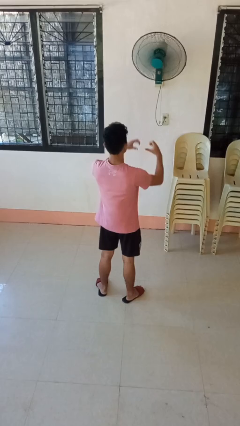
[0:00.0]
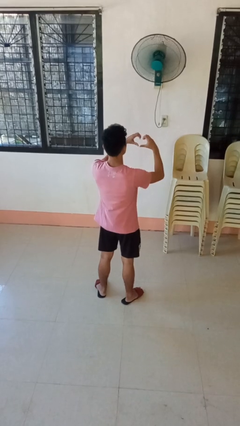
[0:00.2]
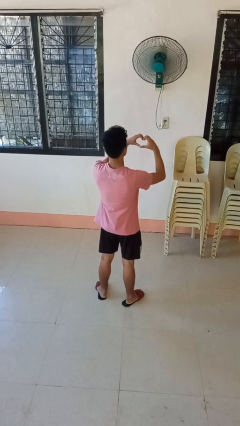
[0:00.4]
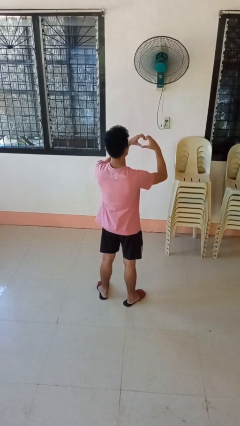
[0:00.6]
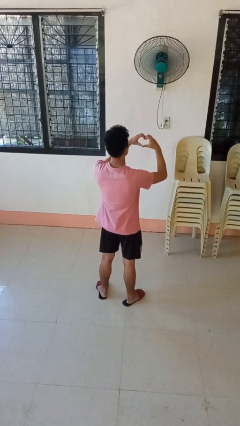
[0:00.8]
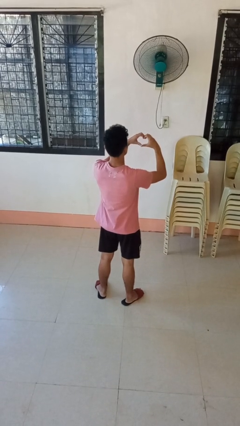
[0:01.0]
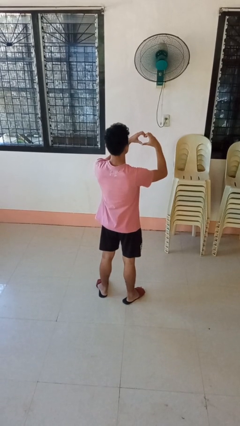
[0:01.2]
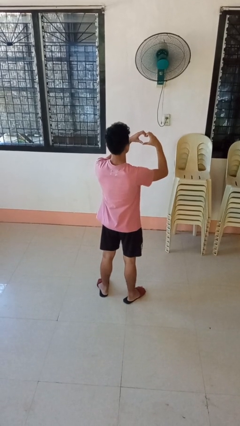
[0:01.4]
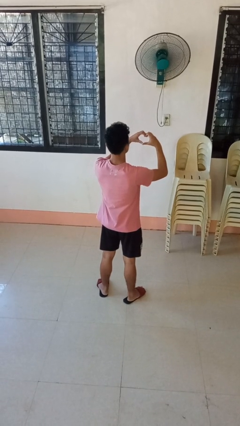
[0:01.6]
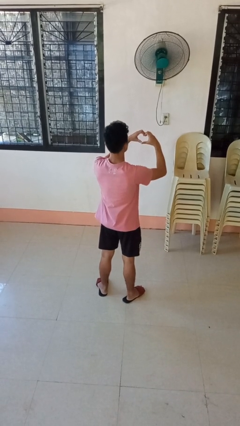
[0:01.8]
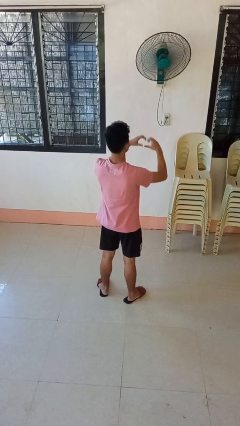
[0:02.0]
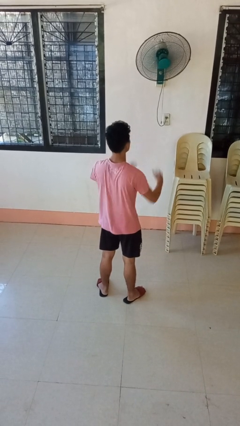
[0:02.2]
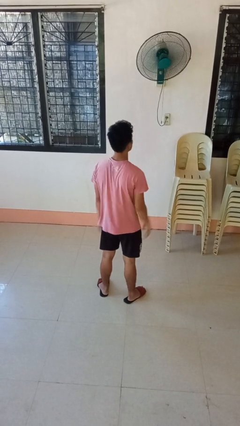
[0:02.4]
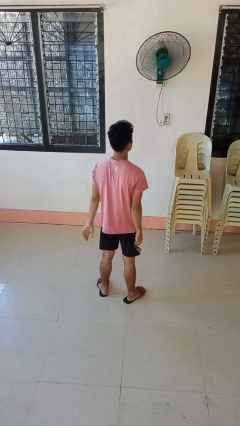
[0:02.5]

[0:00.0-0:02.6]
person gestures heart

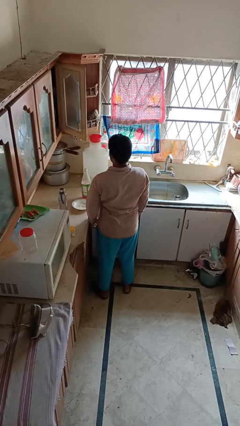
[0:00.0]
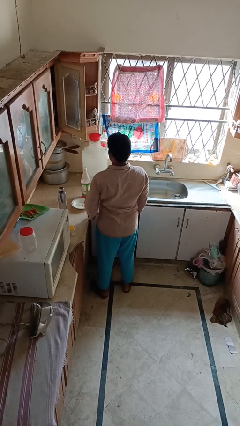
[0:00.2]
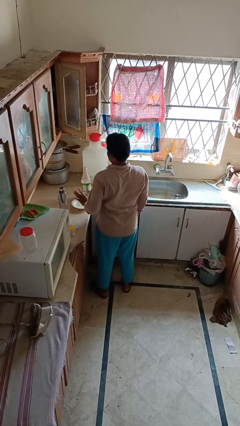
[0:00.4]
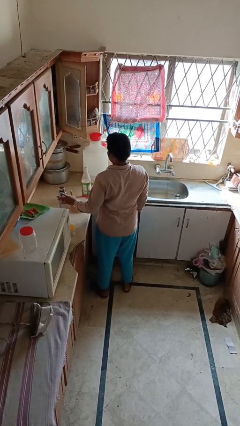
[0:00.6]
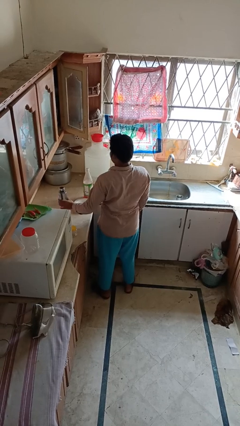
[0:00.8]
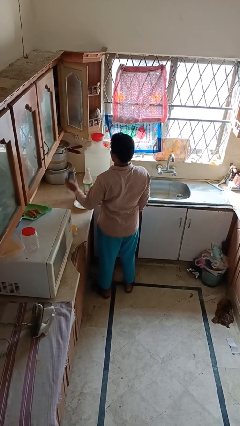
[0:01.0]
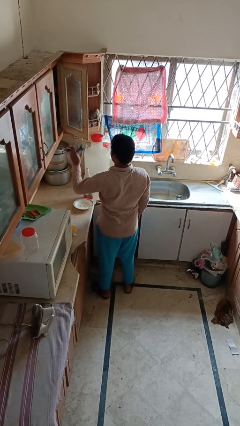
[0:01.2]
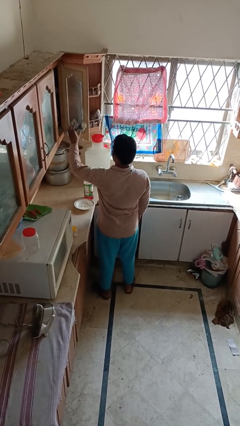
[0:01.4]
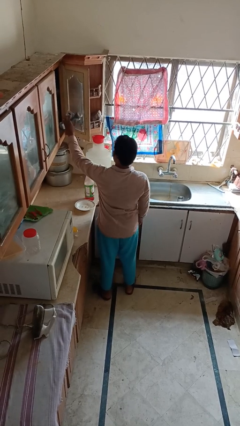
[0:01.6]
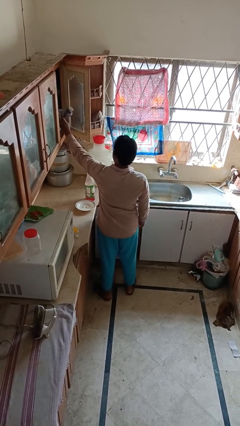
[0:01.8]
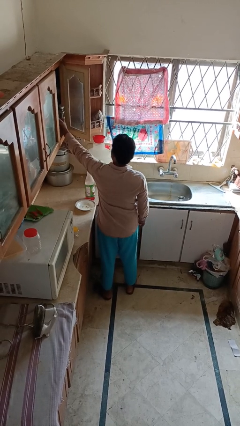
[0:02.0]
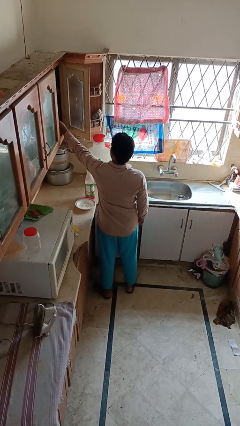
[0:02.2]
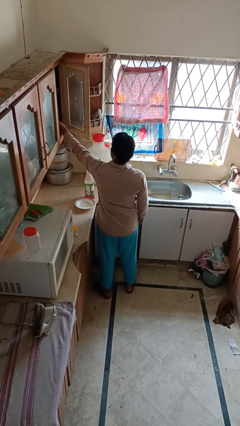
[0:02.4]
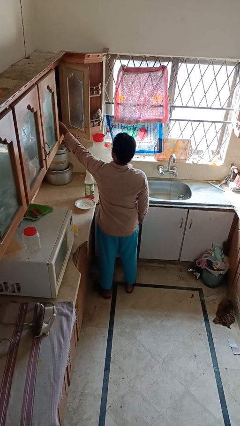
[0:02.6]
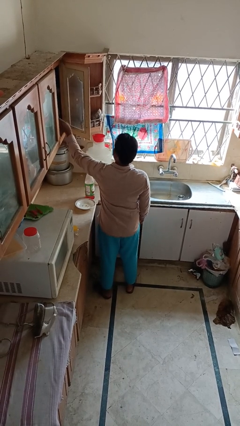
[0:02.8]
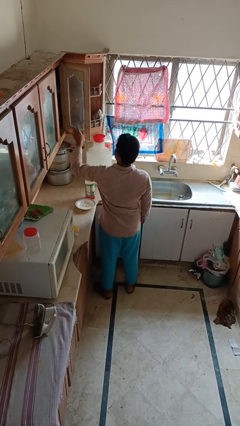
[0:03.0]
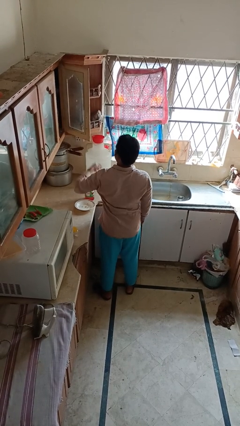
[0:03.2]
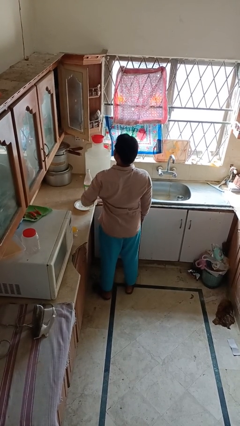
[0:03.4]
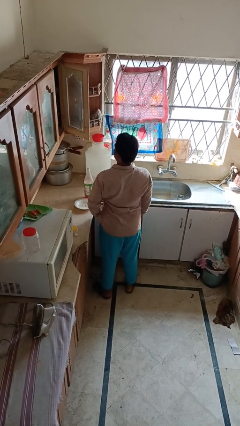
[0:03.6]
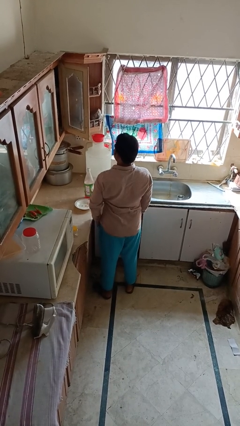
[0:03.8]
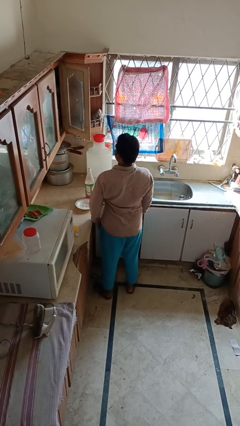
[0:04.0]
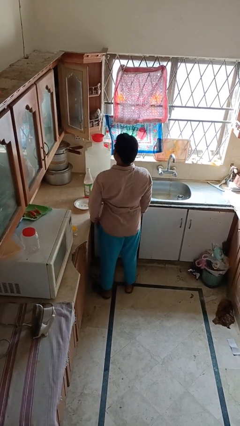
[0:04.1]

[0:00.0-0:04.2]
person puts object in cabinet

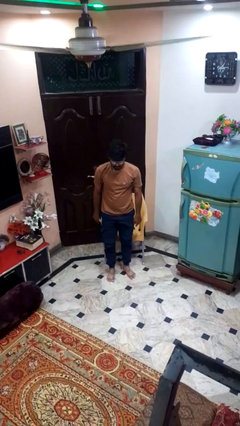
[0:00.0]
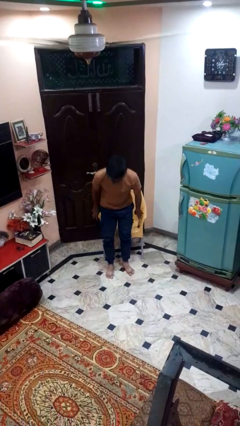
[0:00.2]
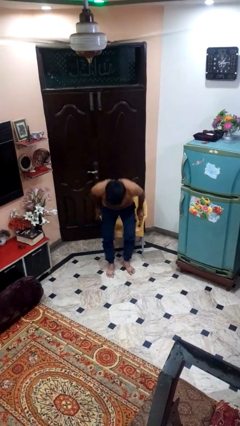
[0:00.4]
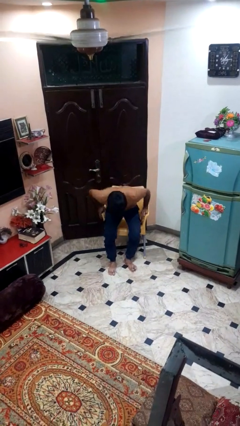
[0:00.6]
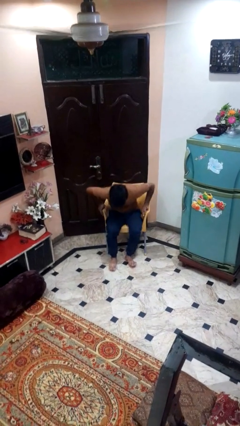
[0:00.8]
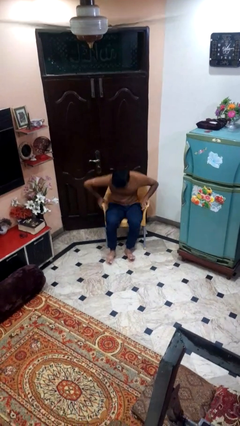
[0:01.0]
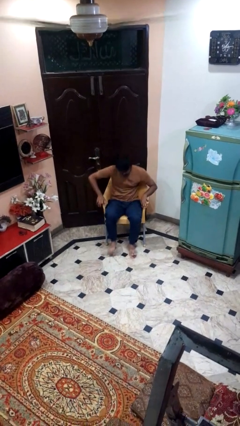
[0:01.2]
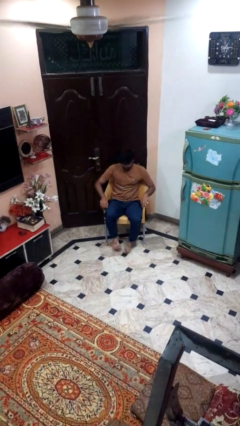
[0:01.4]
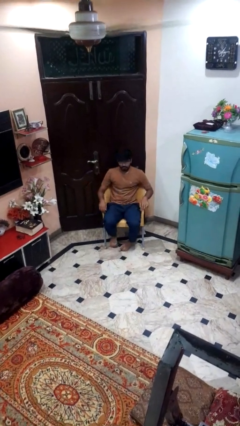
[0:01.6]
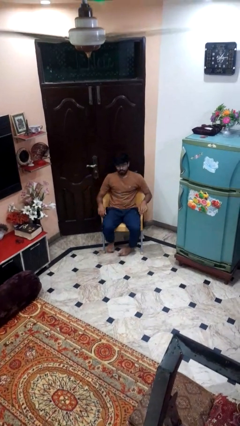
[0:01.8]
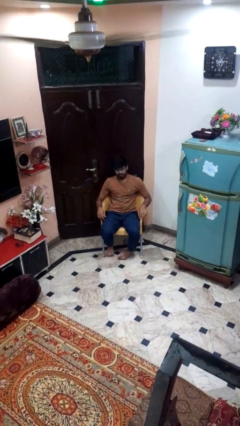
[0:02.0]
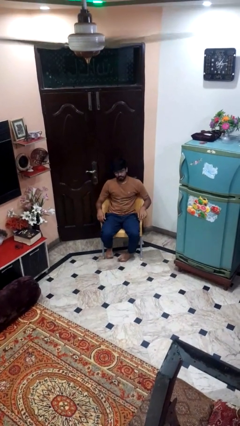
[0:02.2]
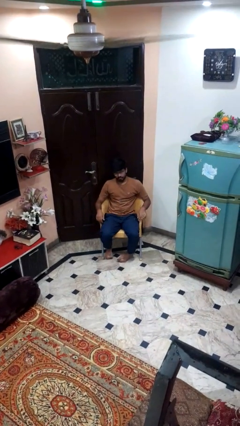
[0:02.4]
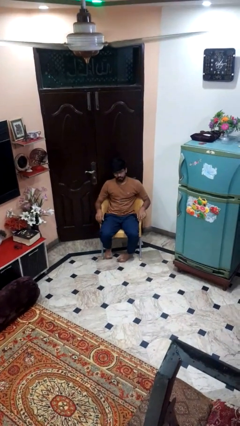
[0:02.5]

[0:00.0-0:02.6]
person sits down

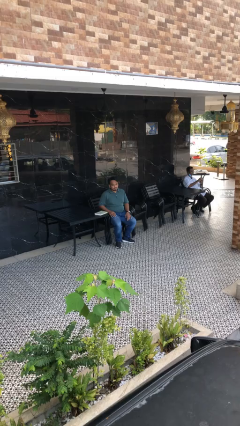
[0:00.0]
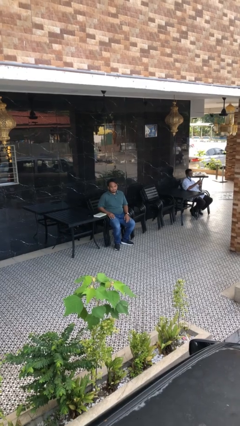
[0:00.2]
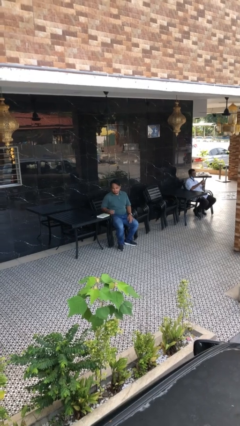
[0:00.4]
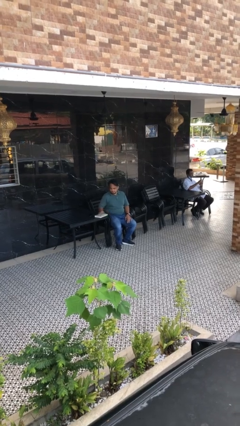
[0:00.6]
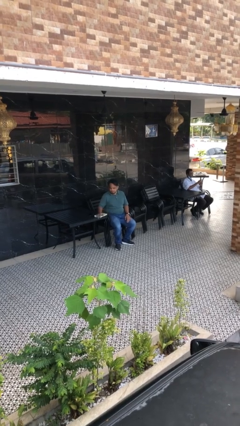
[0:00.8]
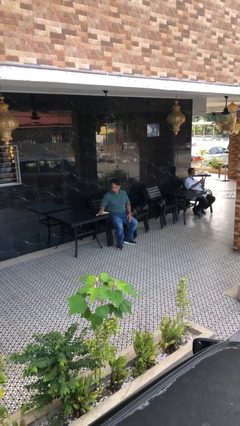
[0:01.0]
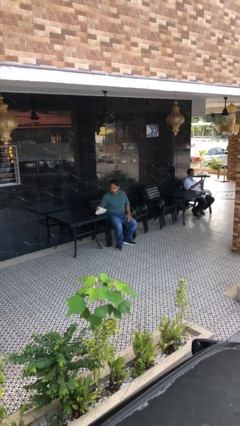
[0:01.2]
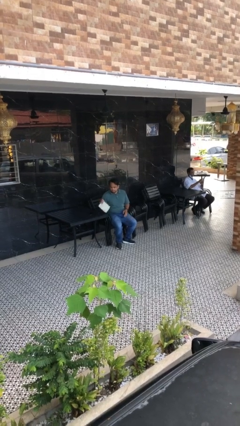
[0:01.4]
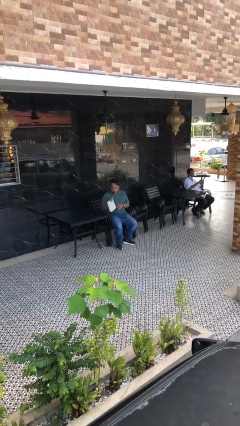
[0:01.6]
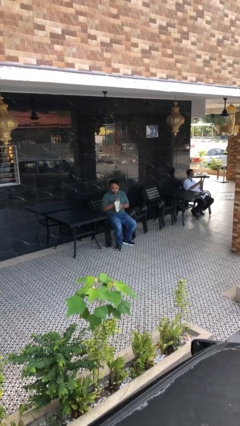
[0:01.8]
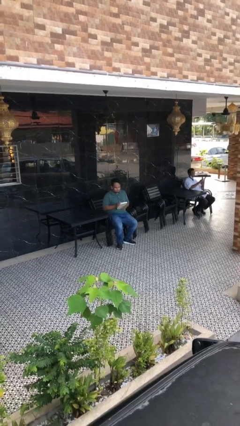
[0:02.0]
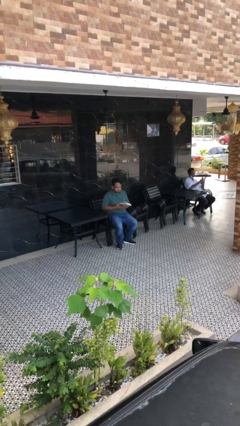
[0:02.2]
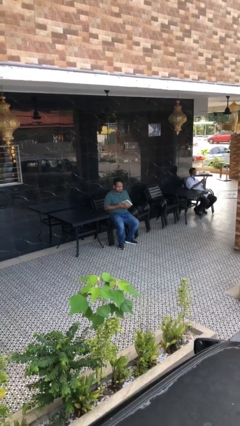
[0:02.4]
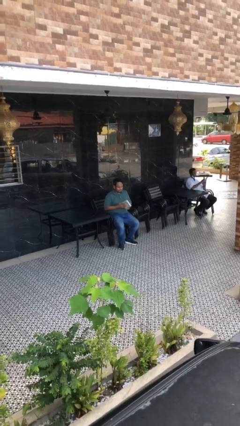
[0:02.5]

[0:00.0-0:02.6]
person picks up object from table

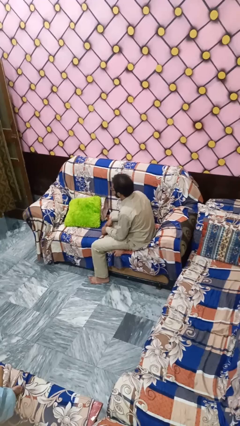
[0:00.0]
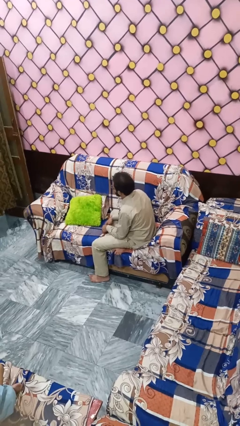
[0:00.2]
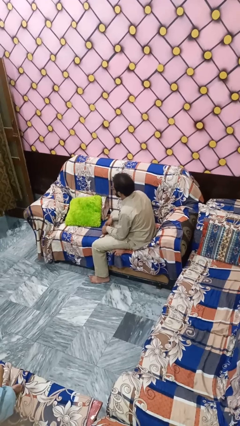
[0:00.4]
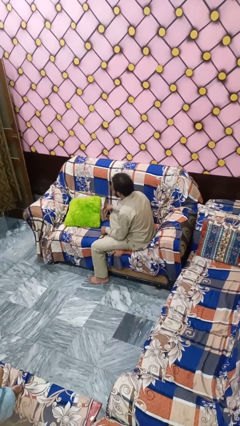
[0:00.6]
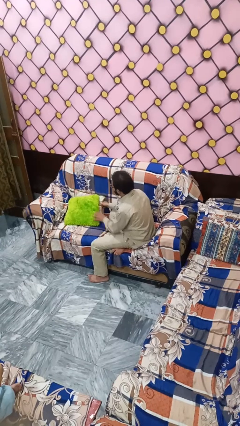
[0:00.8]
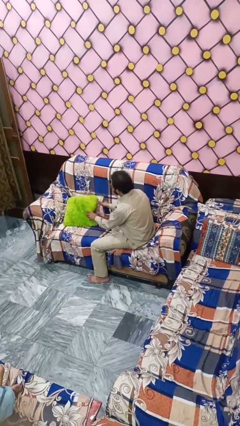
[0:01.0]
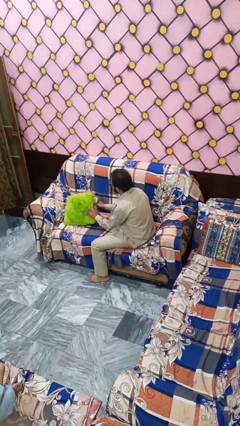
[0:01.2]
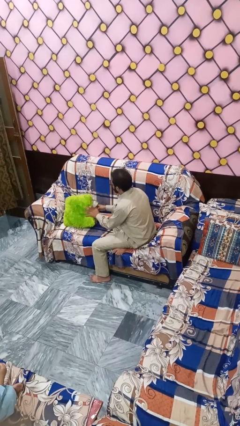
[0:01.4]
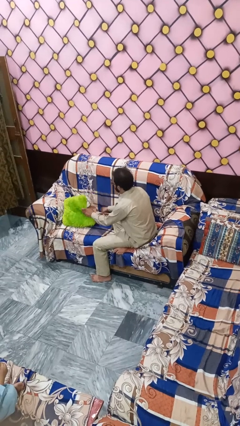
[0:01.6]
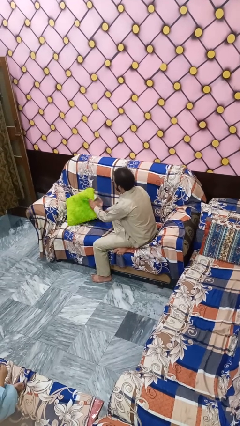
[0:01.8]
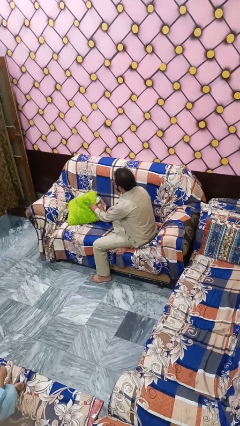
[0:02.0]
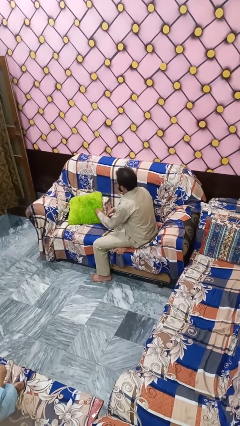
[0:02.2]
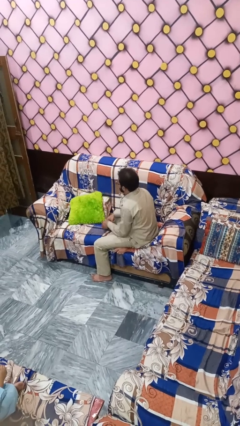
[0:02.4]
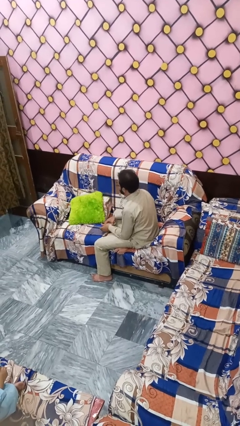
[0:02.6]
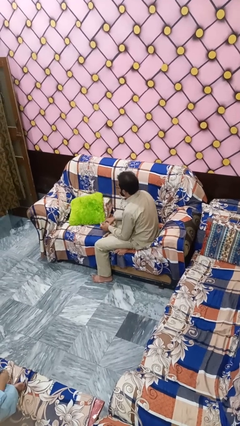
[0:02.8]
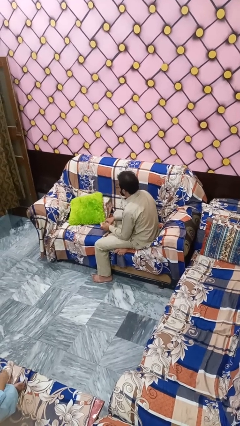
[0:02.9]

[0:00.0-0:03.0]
person searches in couch

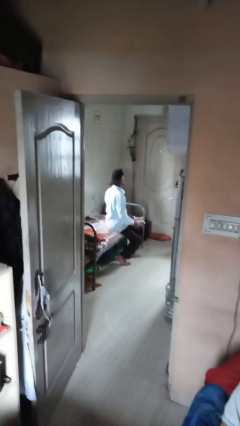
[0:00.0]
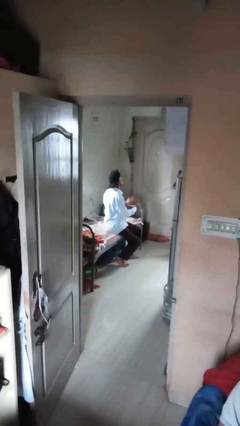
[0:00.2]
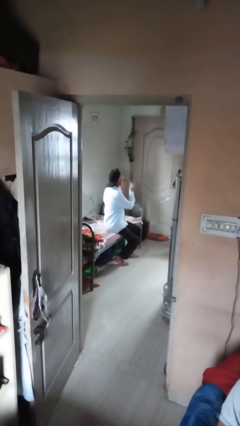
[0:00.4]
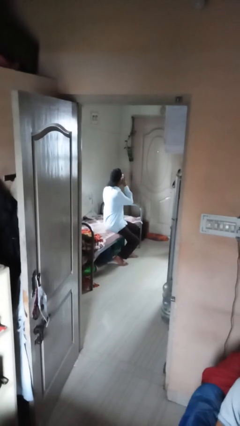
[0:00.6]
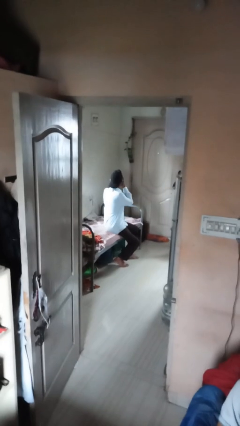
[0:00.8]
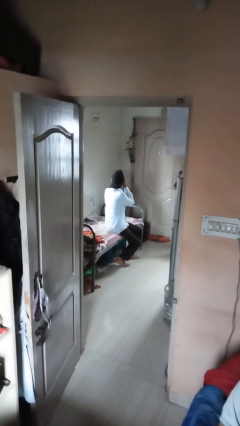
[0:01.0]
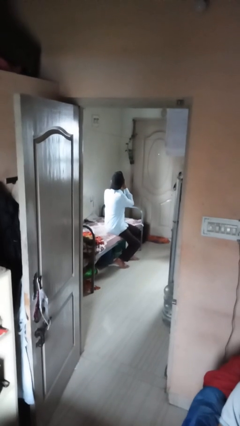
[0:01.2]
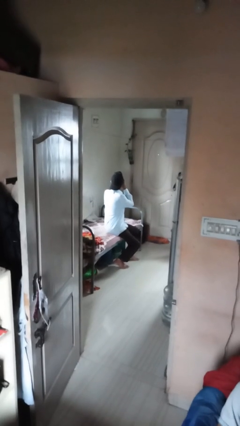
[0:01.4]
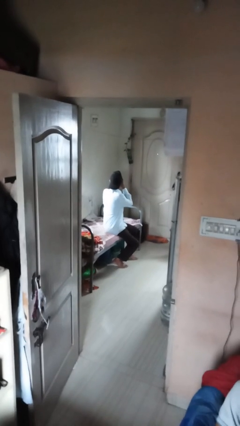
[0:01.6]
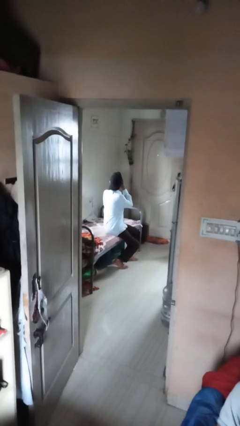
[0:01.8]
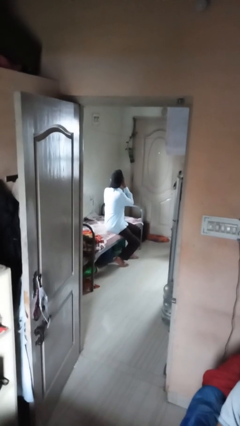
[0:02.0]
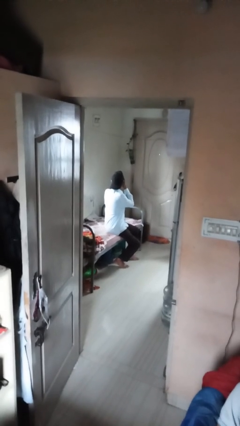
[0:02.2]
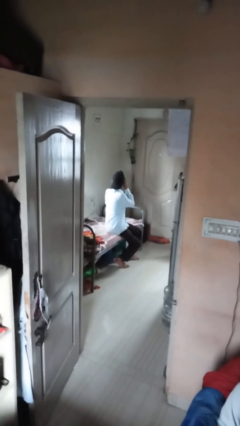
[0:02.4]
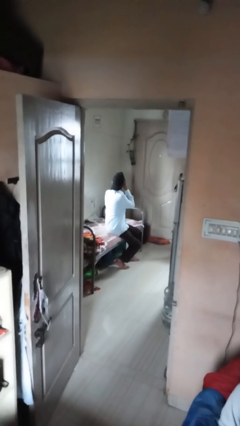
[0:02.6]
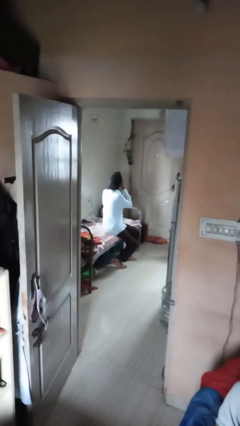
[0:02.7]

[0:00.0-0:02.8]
person covers face with hands
